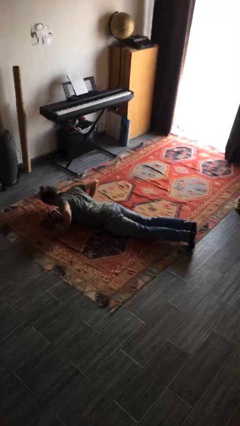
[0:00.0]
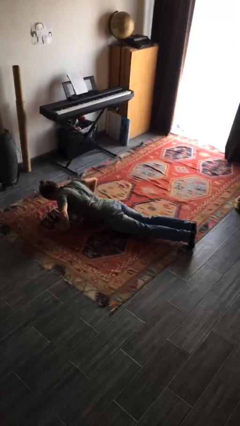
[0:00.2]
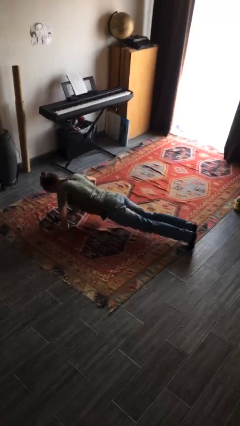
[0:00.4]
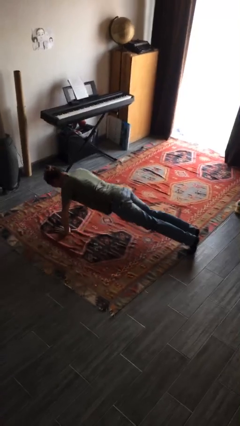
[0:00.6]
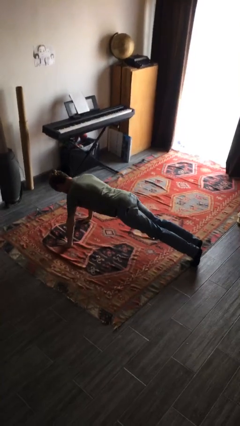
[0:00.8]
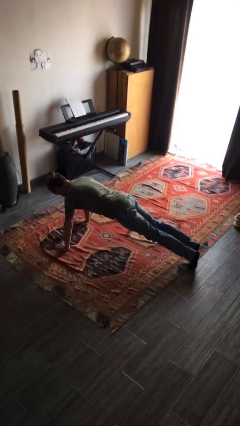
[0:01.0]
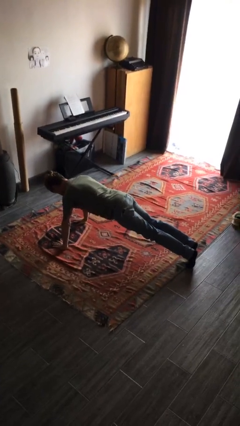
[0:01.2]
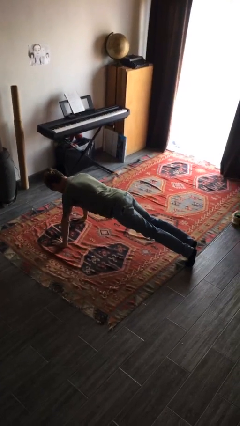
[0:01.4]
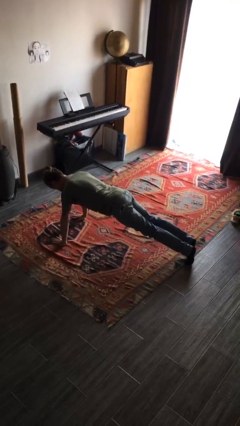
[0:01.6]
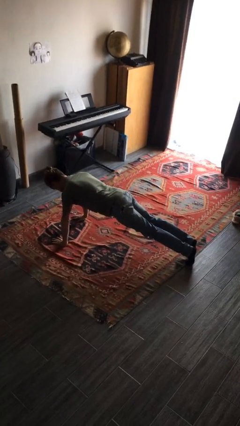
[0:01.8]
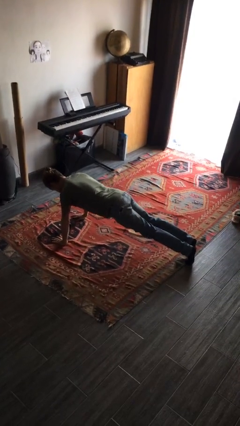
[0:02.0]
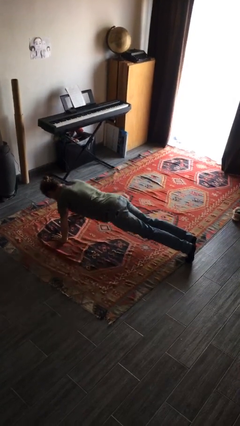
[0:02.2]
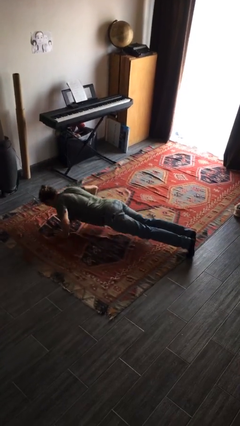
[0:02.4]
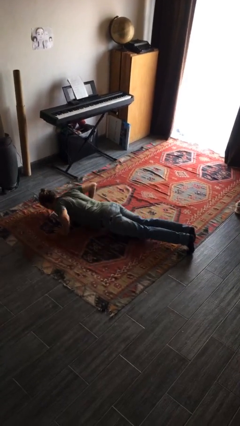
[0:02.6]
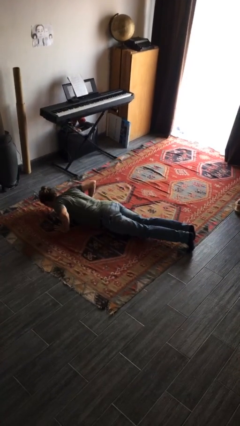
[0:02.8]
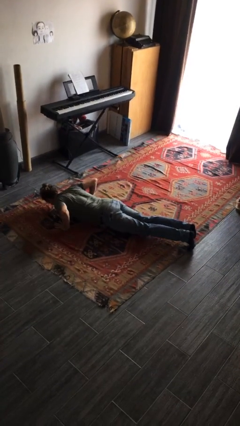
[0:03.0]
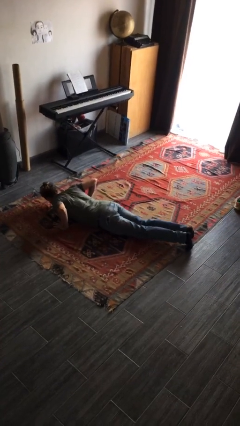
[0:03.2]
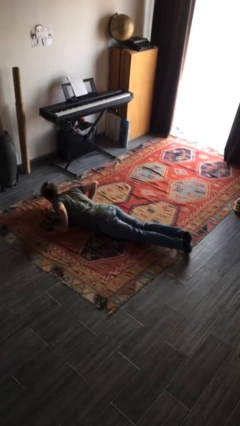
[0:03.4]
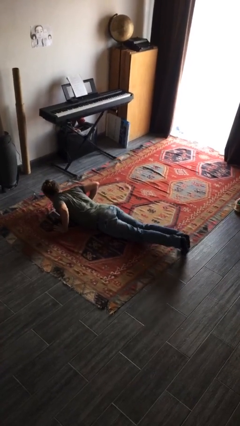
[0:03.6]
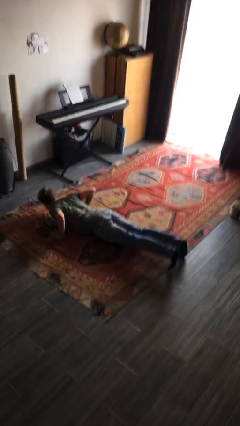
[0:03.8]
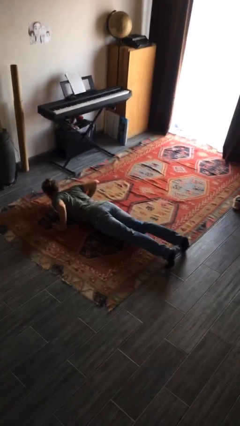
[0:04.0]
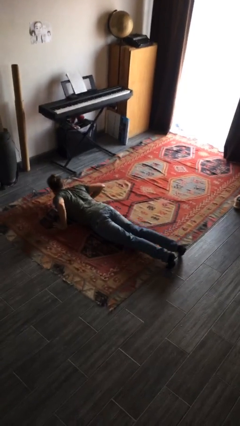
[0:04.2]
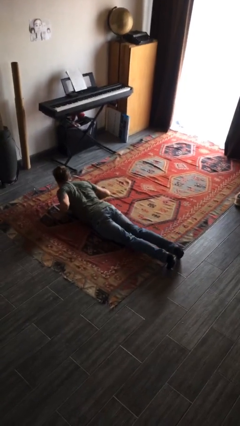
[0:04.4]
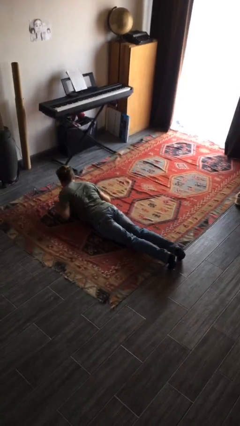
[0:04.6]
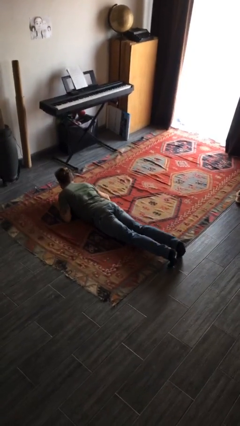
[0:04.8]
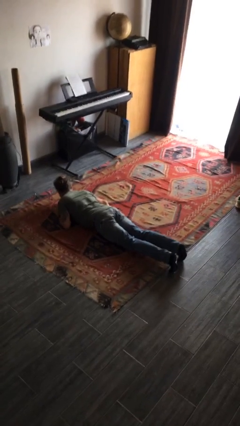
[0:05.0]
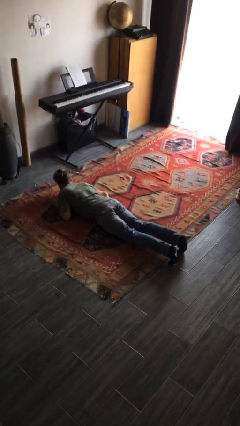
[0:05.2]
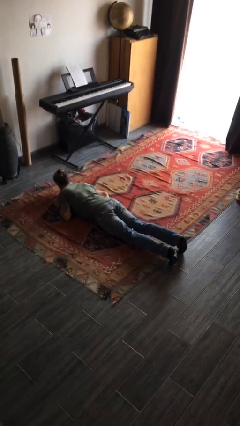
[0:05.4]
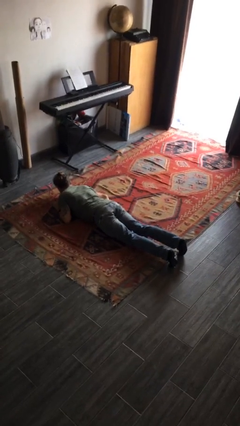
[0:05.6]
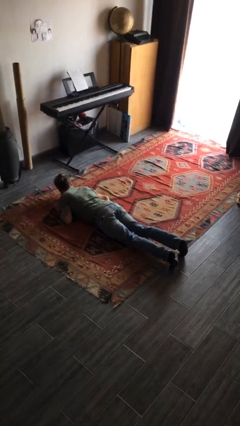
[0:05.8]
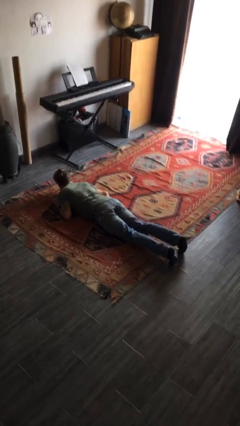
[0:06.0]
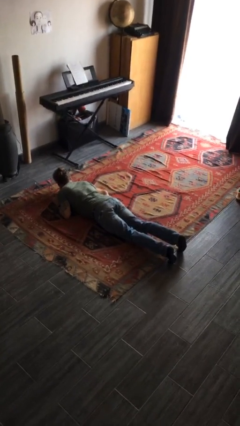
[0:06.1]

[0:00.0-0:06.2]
person exercises with pushup

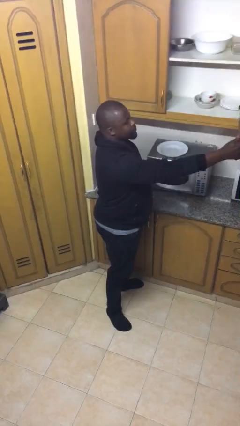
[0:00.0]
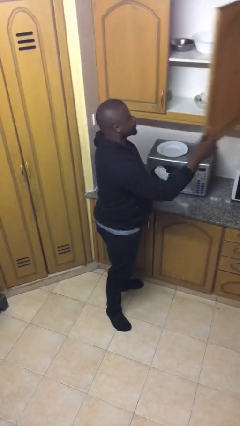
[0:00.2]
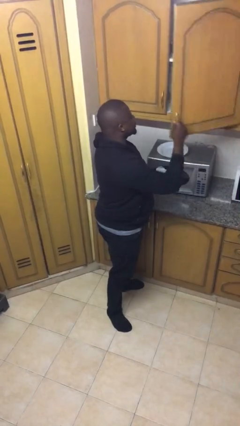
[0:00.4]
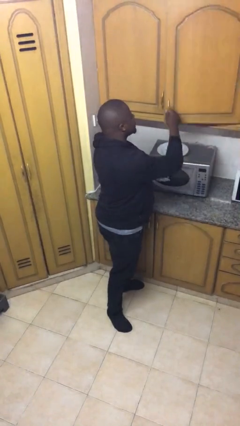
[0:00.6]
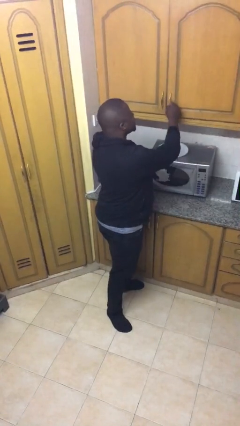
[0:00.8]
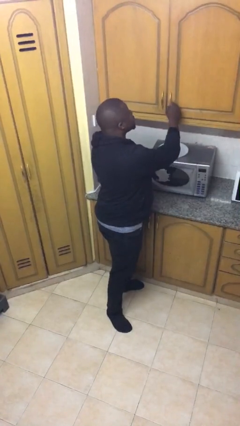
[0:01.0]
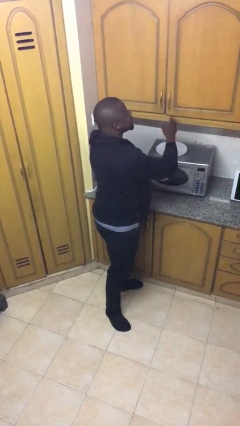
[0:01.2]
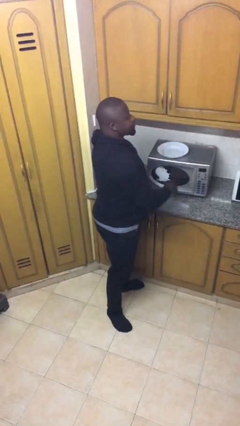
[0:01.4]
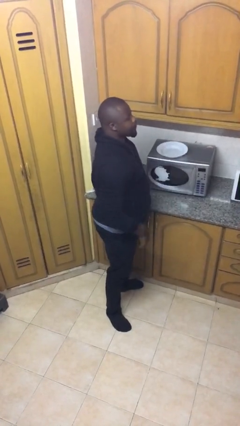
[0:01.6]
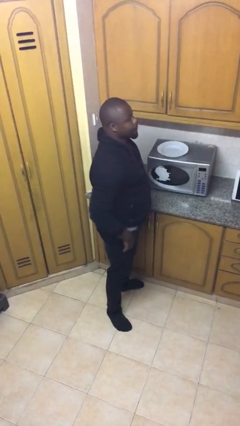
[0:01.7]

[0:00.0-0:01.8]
person closes cabinet

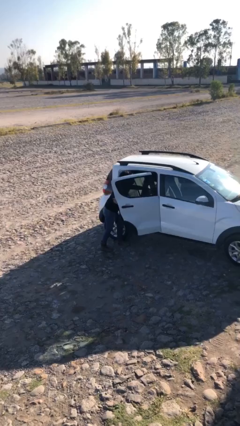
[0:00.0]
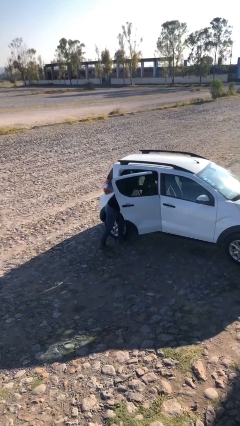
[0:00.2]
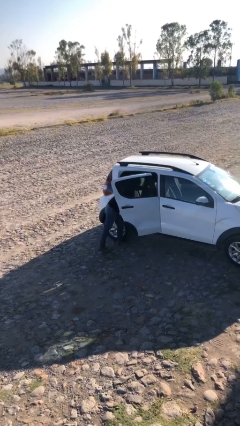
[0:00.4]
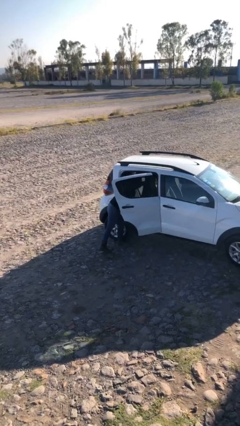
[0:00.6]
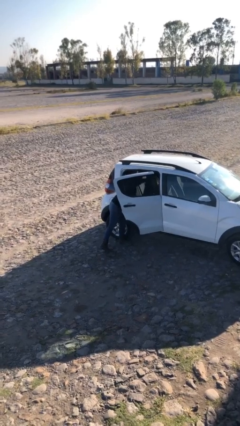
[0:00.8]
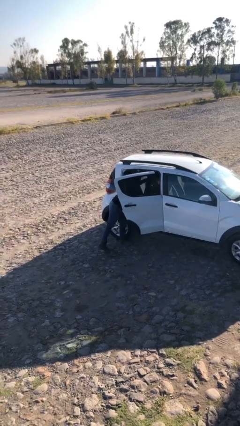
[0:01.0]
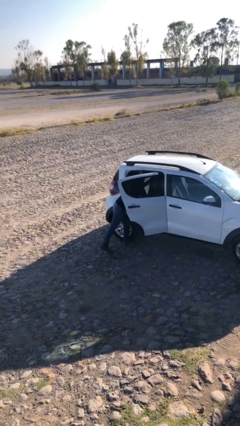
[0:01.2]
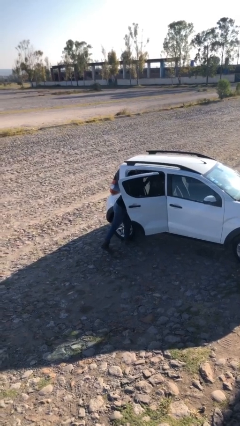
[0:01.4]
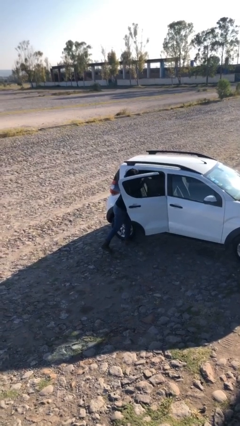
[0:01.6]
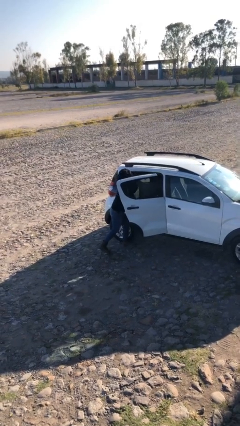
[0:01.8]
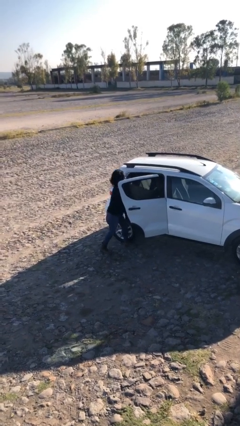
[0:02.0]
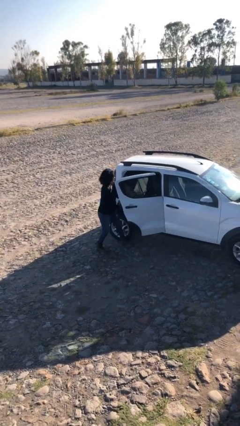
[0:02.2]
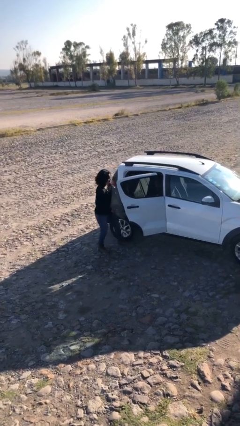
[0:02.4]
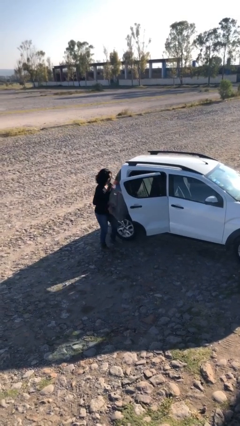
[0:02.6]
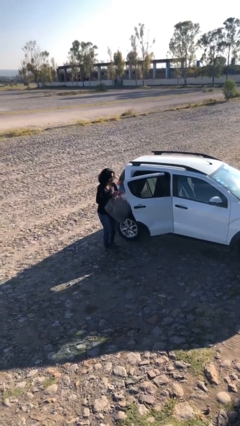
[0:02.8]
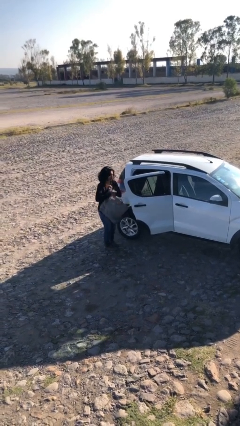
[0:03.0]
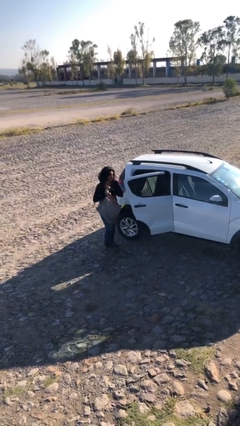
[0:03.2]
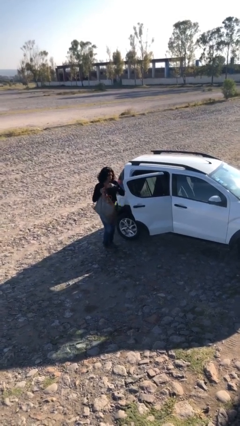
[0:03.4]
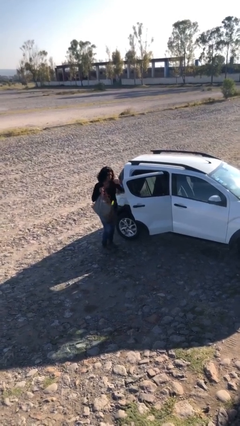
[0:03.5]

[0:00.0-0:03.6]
person unloads car

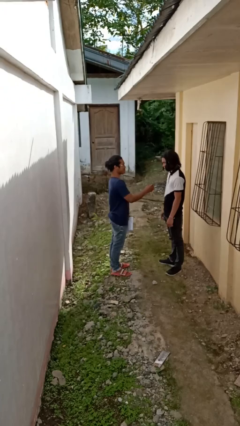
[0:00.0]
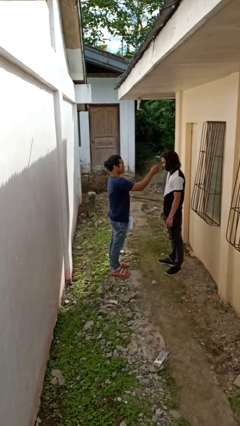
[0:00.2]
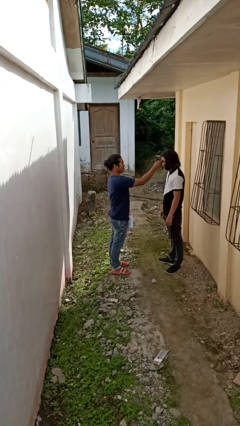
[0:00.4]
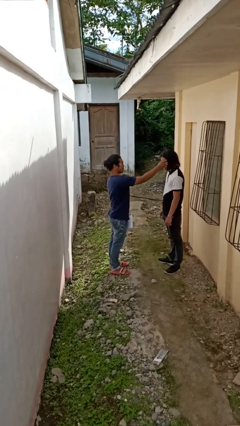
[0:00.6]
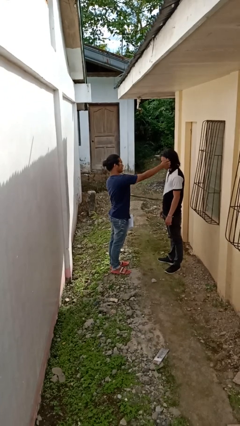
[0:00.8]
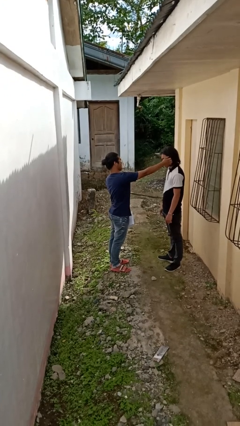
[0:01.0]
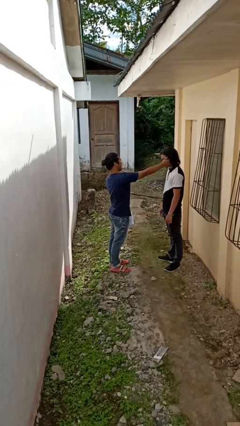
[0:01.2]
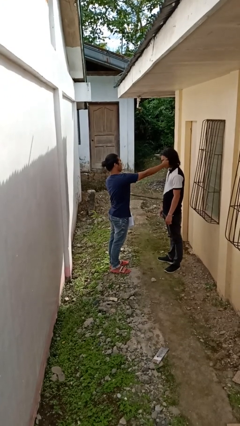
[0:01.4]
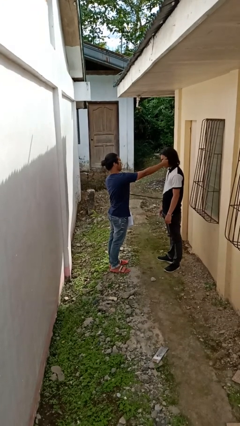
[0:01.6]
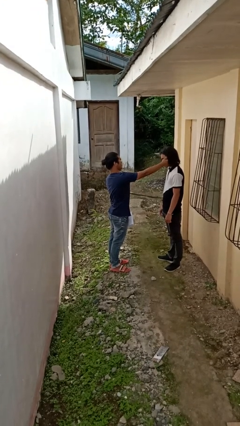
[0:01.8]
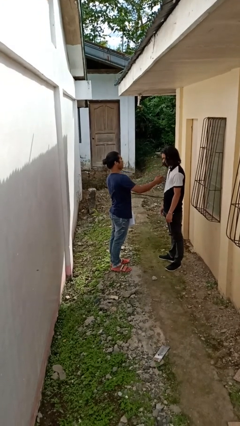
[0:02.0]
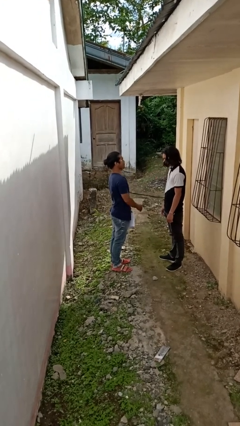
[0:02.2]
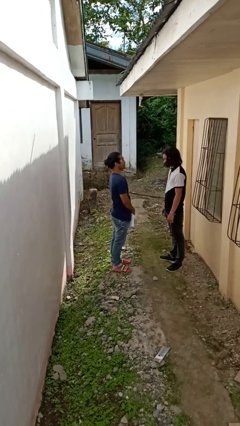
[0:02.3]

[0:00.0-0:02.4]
person touches face of person

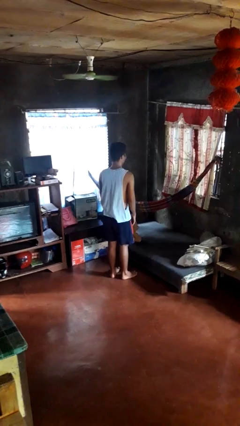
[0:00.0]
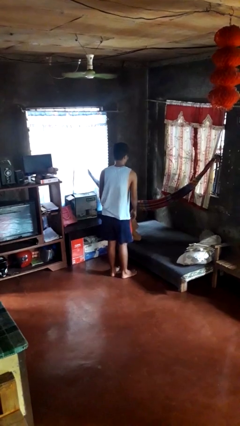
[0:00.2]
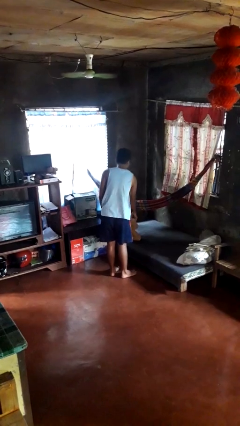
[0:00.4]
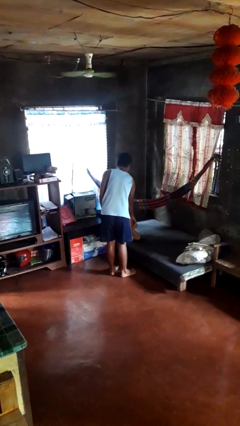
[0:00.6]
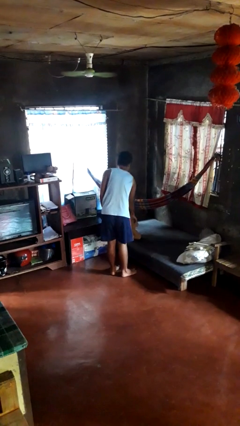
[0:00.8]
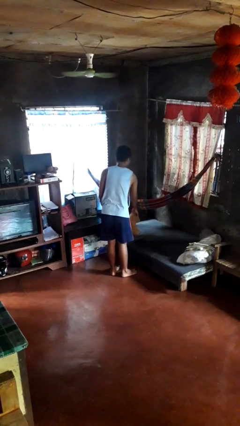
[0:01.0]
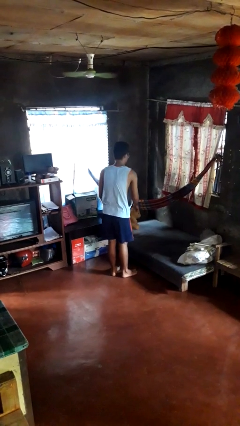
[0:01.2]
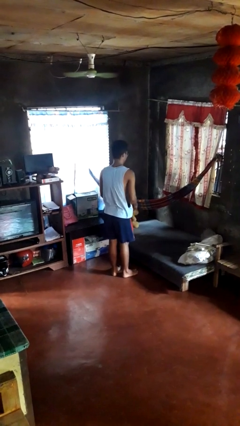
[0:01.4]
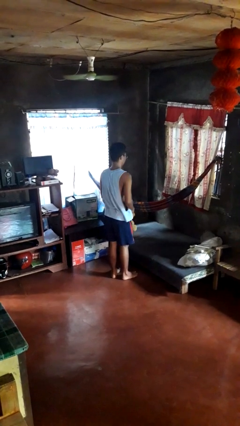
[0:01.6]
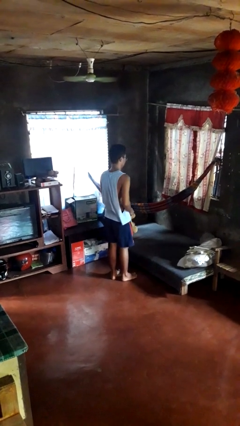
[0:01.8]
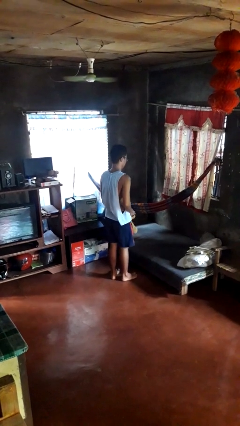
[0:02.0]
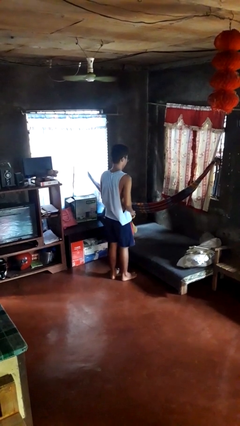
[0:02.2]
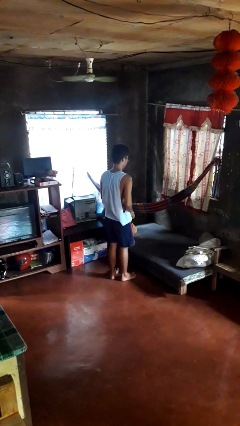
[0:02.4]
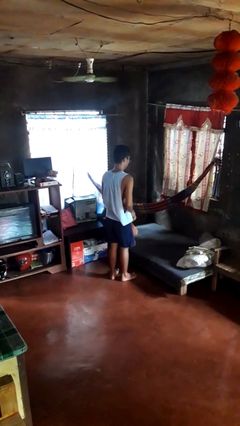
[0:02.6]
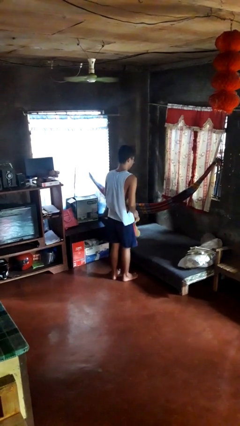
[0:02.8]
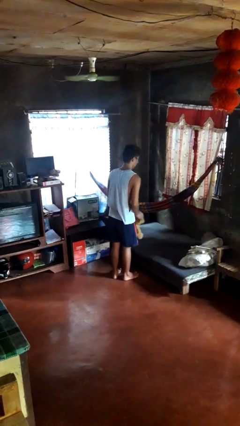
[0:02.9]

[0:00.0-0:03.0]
person picks up object from bed

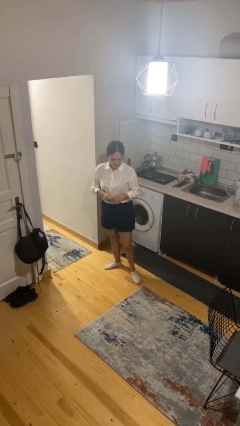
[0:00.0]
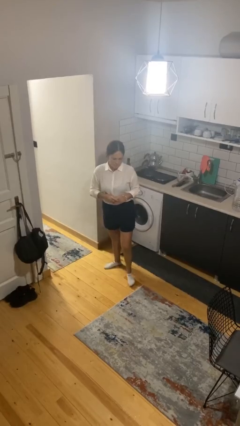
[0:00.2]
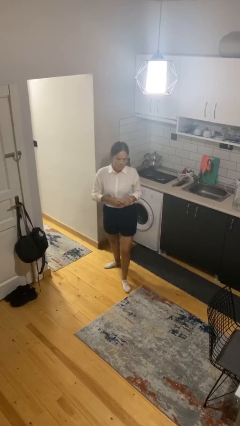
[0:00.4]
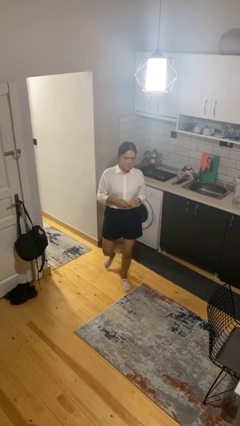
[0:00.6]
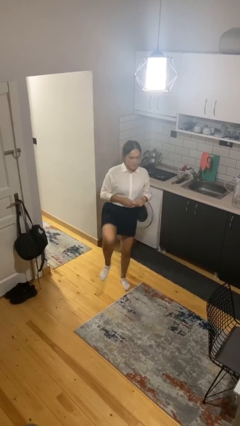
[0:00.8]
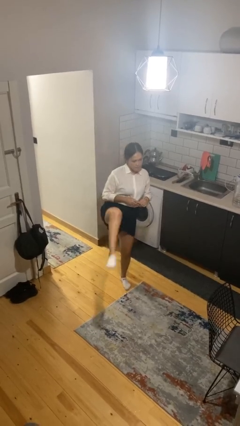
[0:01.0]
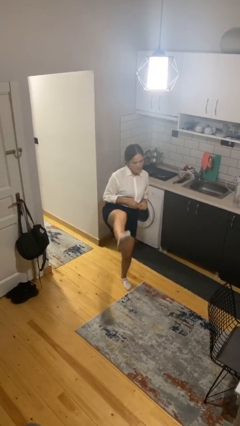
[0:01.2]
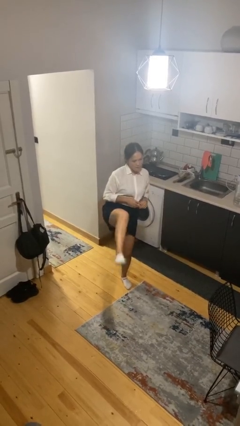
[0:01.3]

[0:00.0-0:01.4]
person karate kicks
